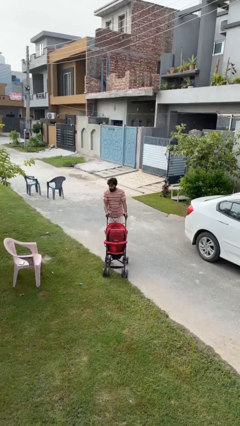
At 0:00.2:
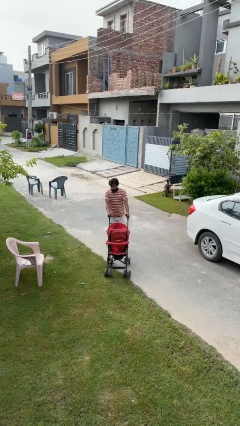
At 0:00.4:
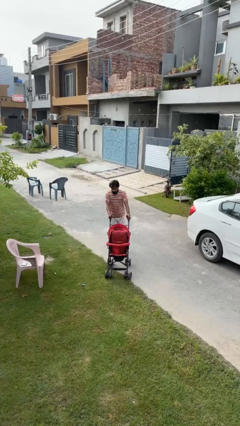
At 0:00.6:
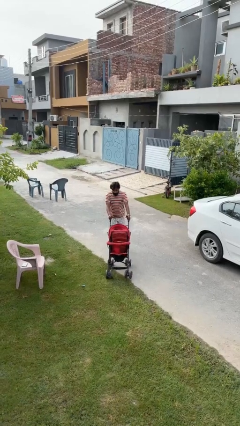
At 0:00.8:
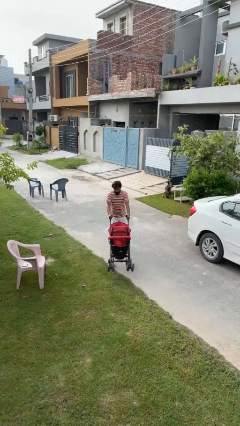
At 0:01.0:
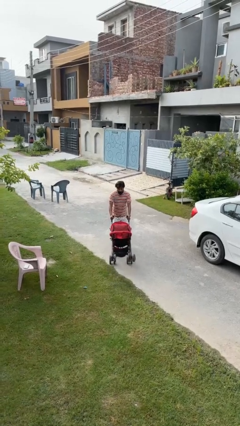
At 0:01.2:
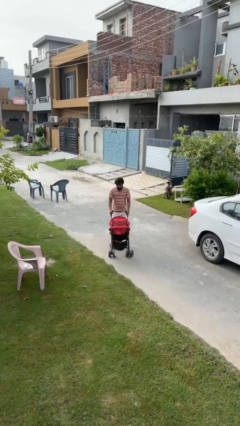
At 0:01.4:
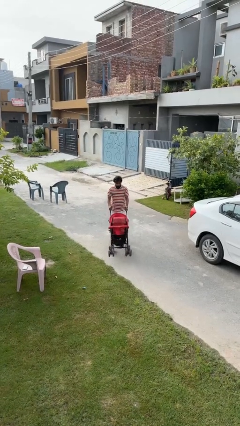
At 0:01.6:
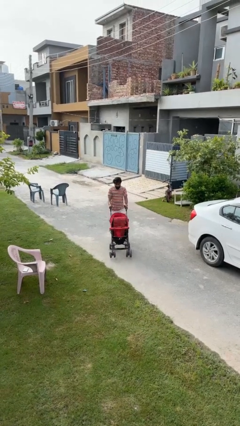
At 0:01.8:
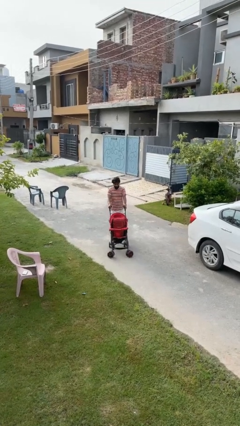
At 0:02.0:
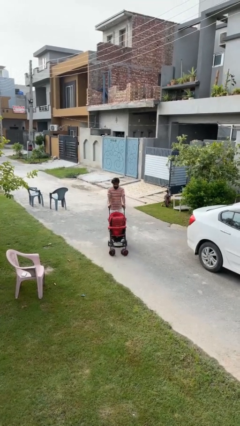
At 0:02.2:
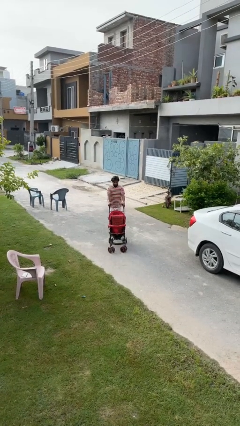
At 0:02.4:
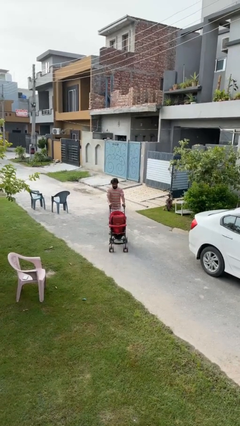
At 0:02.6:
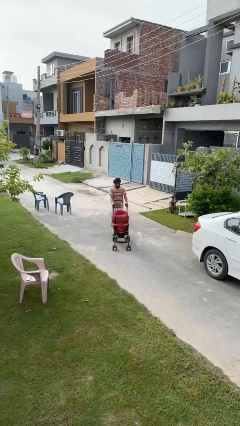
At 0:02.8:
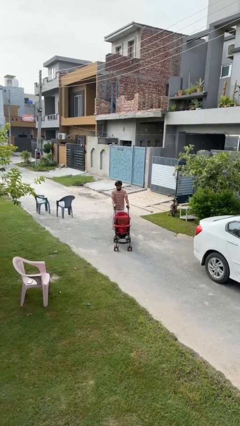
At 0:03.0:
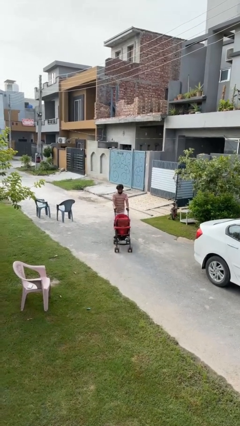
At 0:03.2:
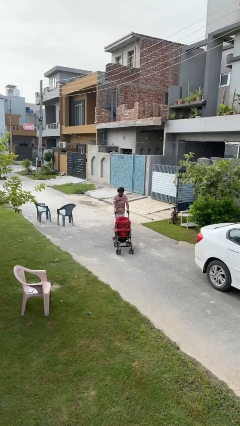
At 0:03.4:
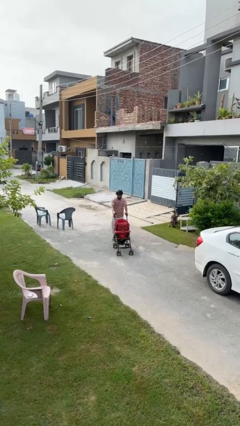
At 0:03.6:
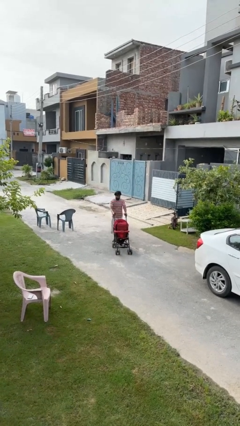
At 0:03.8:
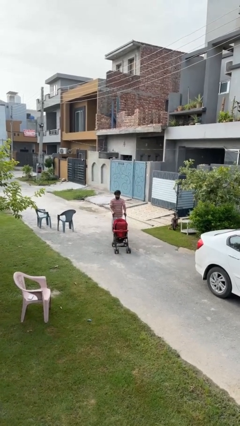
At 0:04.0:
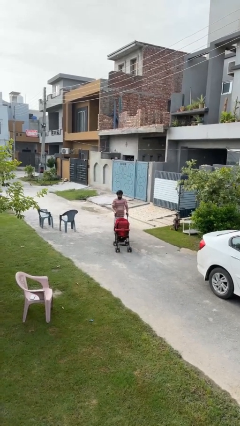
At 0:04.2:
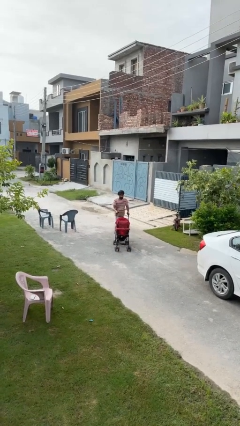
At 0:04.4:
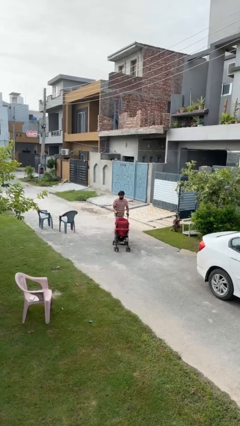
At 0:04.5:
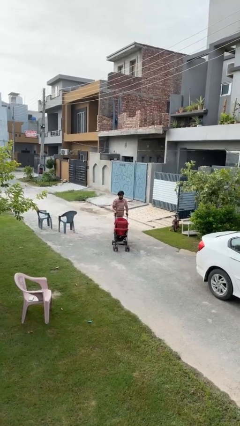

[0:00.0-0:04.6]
person pulls wheeled cart

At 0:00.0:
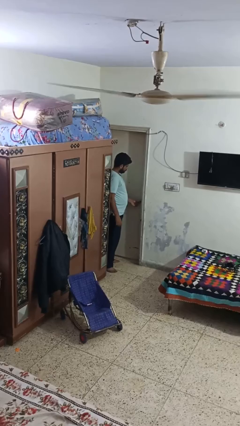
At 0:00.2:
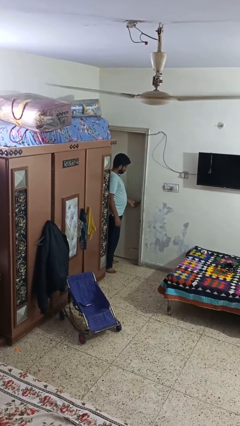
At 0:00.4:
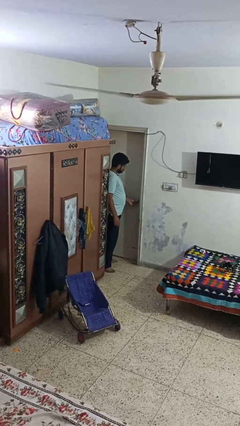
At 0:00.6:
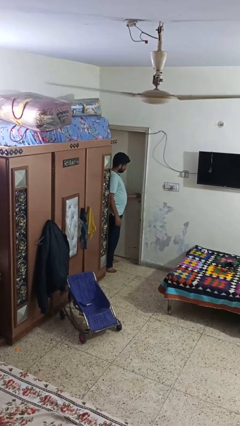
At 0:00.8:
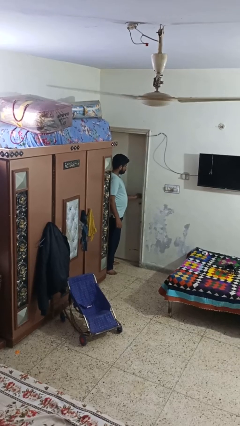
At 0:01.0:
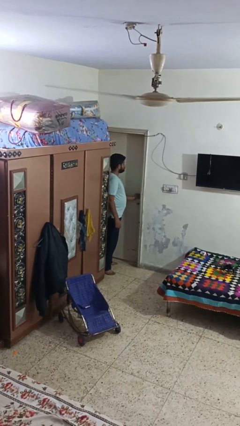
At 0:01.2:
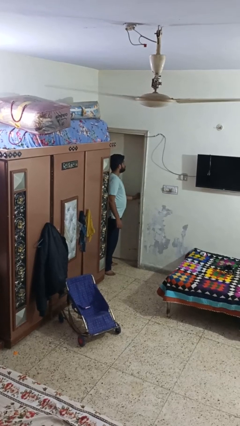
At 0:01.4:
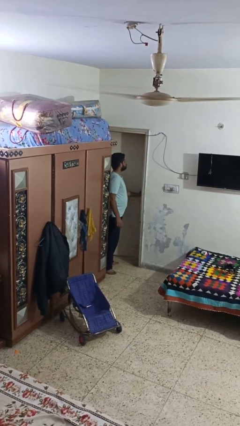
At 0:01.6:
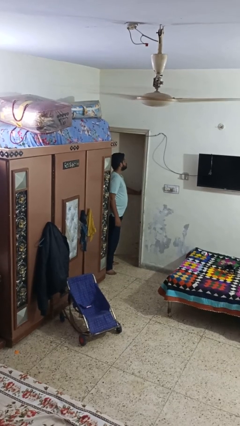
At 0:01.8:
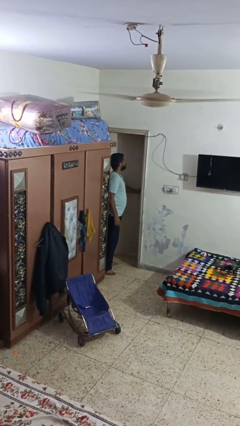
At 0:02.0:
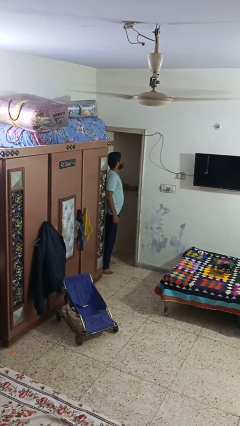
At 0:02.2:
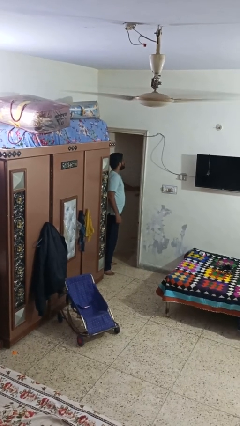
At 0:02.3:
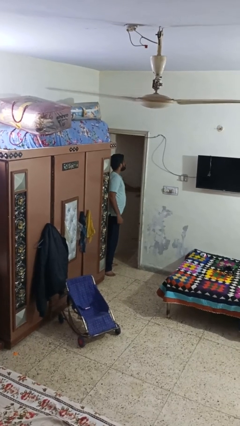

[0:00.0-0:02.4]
person opens facility door

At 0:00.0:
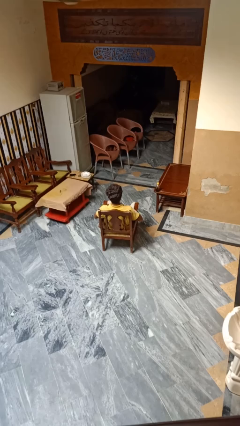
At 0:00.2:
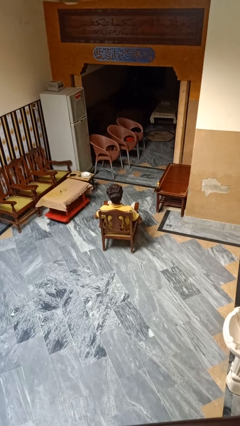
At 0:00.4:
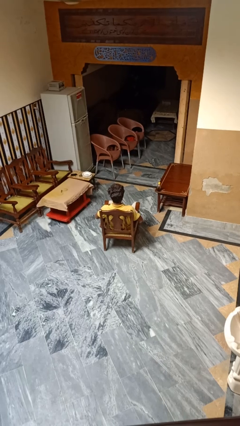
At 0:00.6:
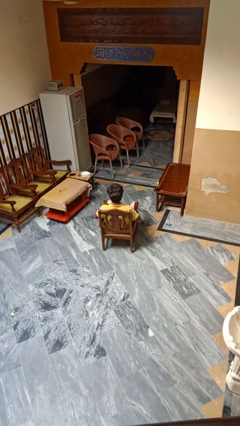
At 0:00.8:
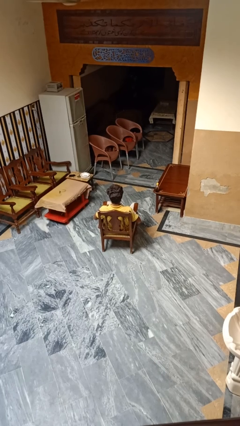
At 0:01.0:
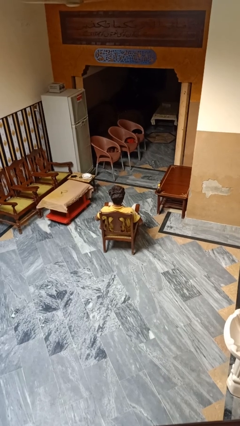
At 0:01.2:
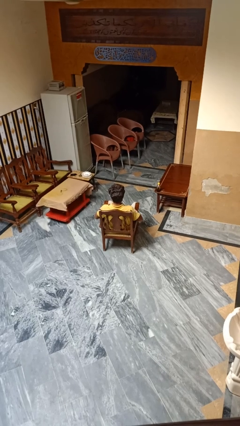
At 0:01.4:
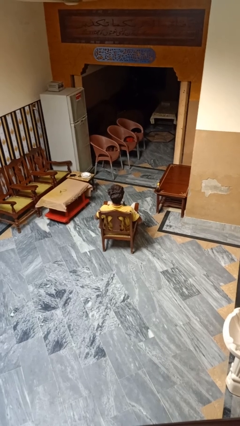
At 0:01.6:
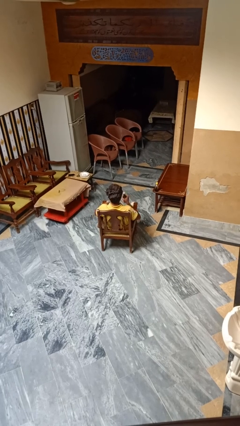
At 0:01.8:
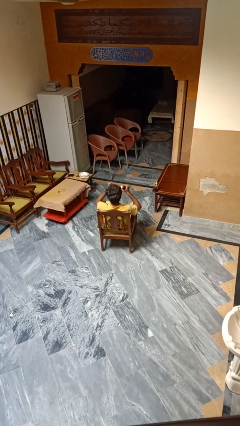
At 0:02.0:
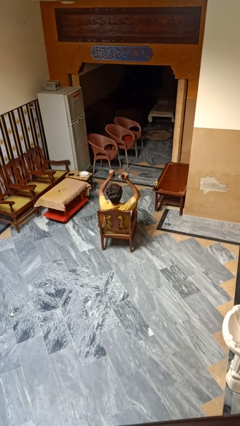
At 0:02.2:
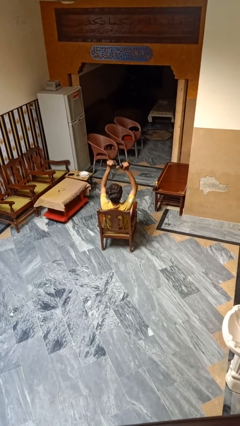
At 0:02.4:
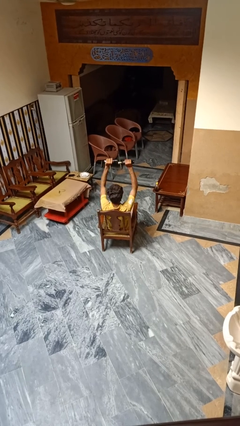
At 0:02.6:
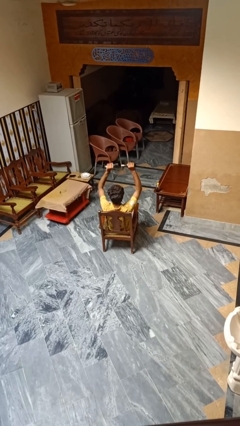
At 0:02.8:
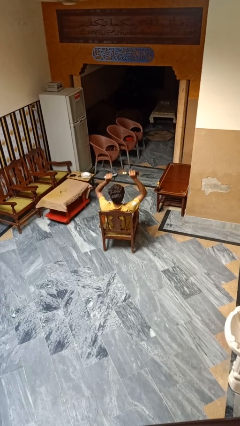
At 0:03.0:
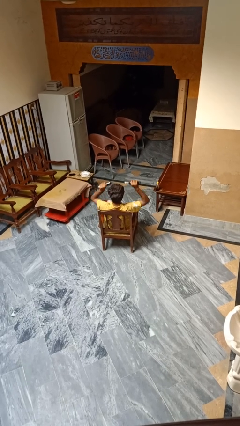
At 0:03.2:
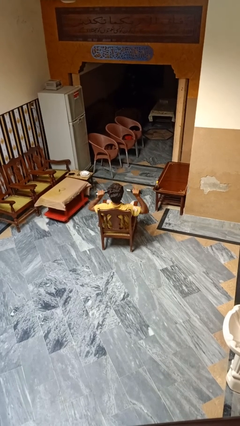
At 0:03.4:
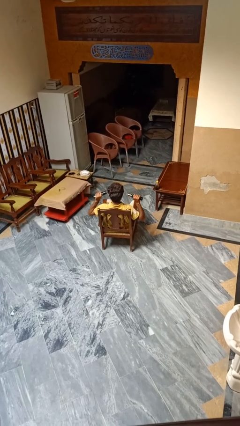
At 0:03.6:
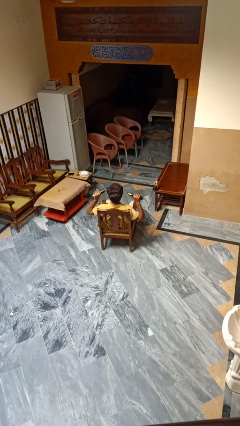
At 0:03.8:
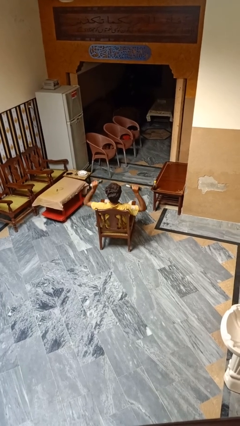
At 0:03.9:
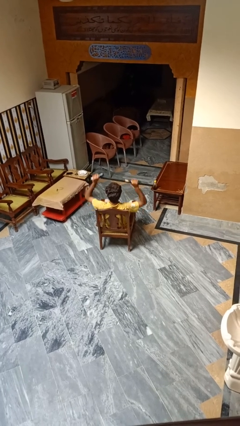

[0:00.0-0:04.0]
person lifts dumbbells

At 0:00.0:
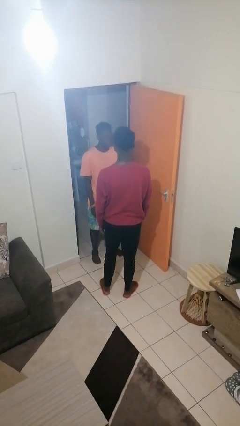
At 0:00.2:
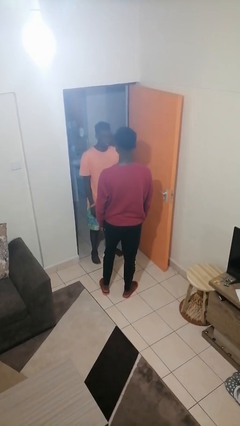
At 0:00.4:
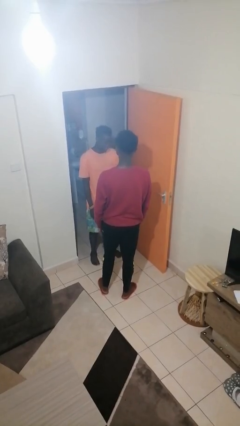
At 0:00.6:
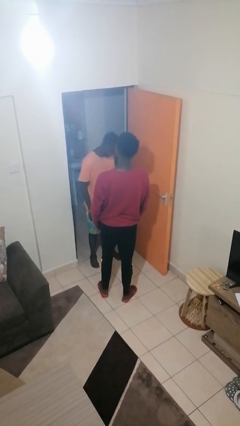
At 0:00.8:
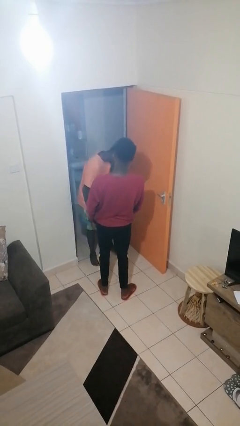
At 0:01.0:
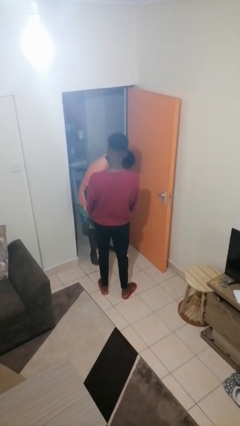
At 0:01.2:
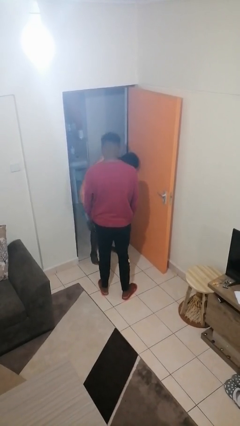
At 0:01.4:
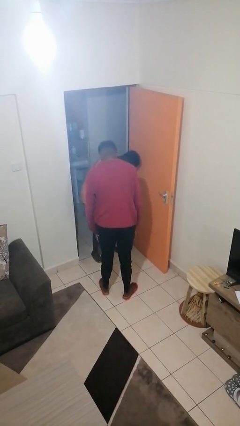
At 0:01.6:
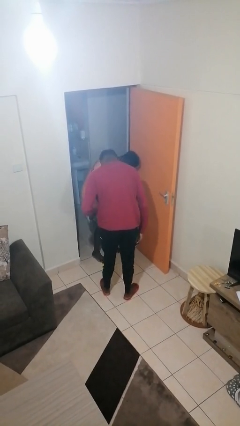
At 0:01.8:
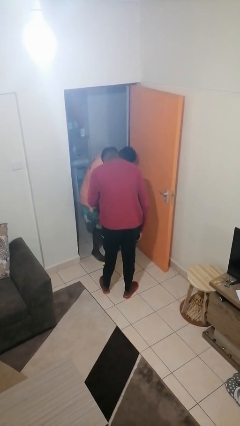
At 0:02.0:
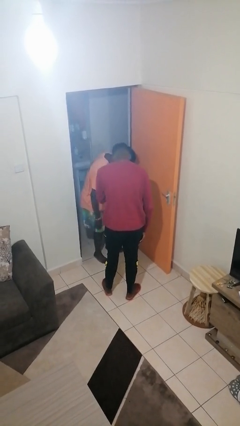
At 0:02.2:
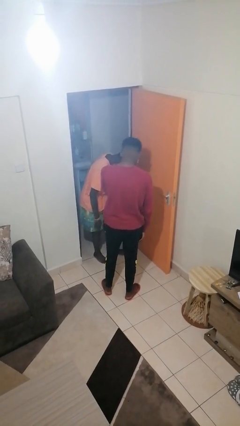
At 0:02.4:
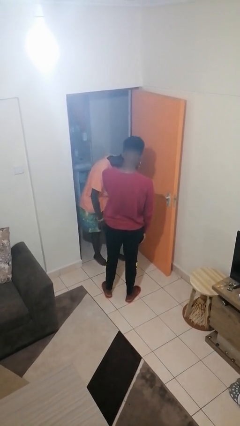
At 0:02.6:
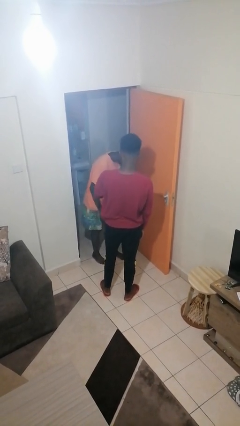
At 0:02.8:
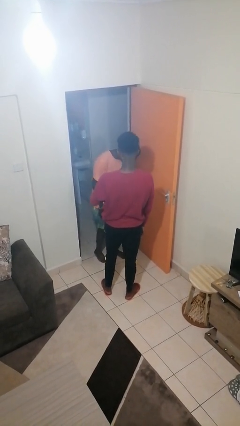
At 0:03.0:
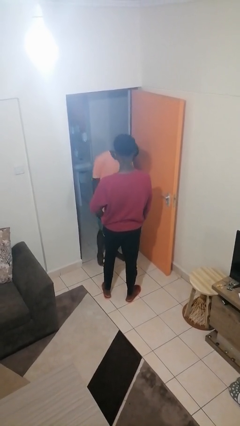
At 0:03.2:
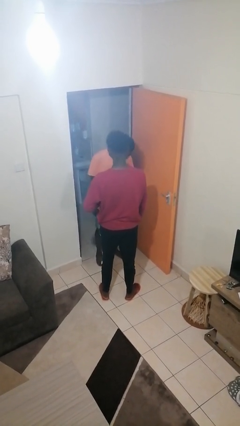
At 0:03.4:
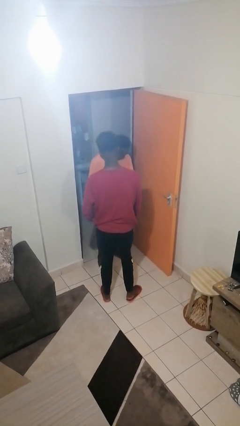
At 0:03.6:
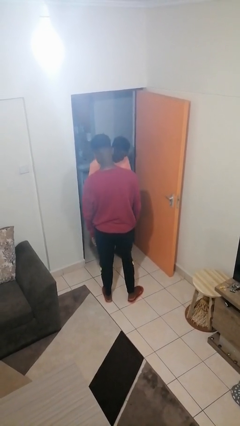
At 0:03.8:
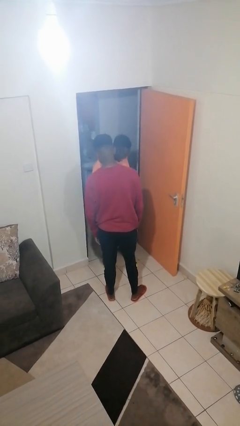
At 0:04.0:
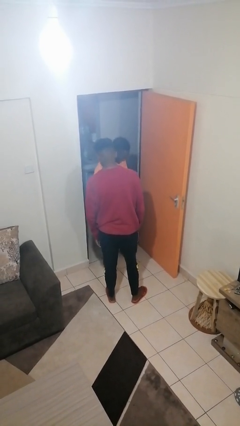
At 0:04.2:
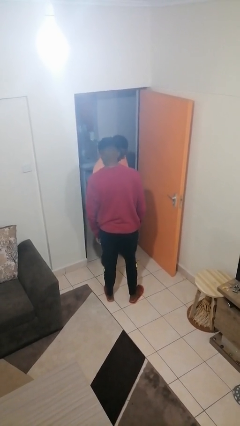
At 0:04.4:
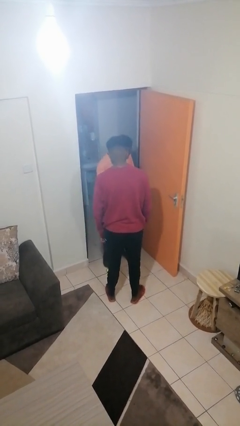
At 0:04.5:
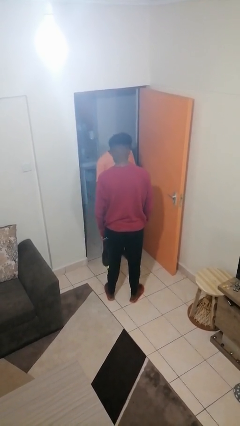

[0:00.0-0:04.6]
person laughs with person

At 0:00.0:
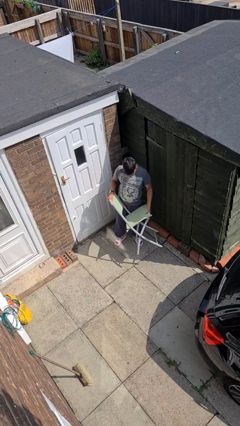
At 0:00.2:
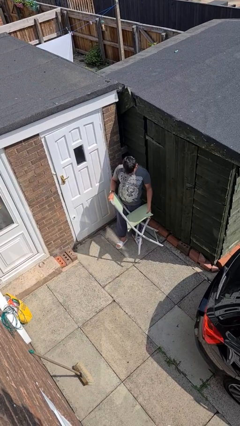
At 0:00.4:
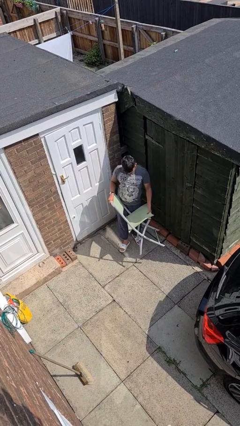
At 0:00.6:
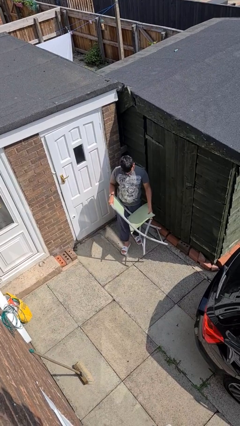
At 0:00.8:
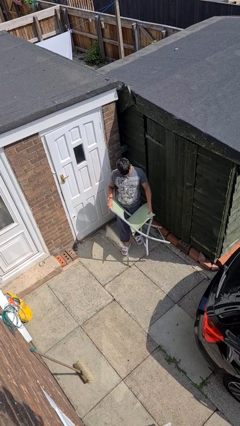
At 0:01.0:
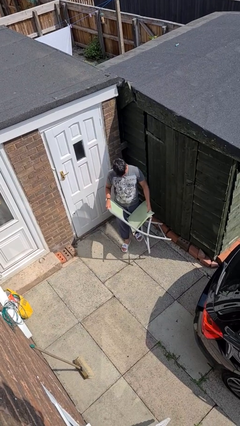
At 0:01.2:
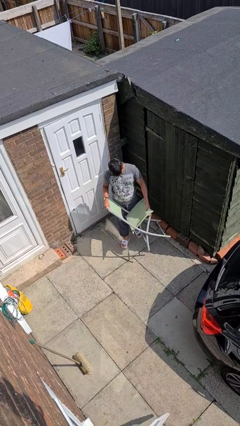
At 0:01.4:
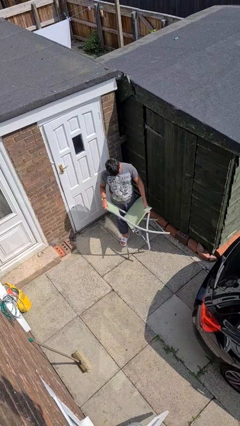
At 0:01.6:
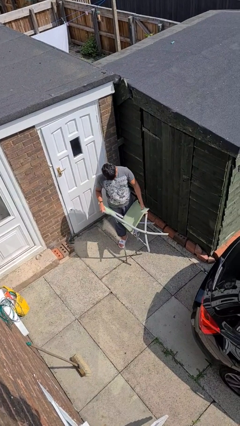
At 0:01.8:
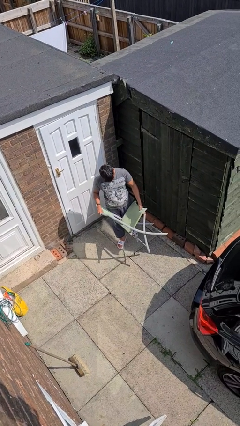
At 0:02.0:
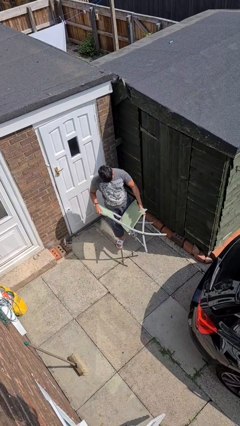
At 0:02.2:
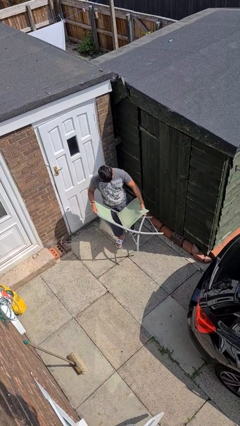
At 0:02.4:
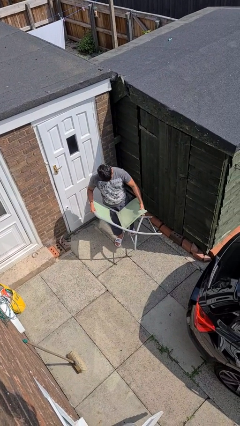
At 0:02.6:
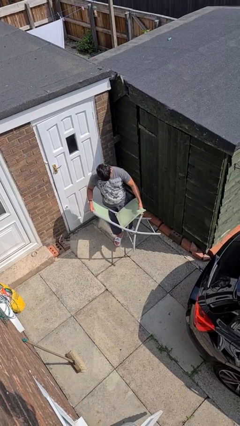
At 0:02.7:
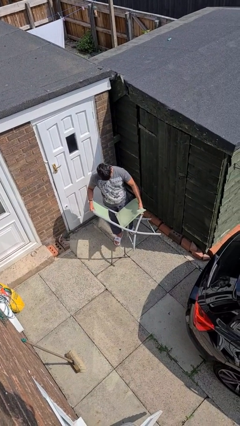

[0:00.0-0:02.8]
person carries furniture
